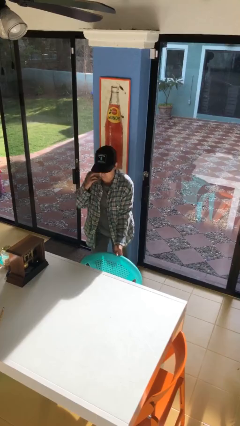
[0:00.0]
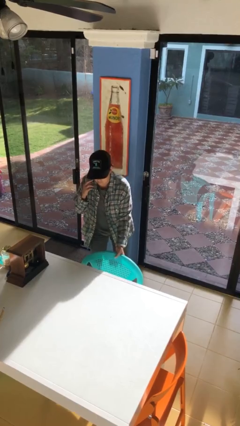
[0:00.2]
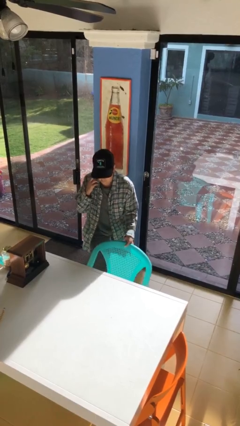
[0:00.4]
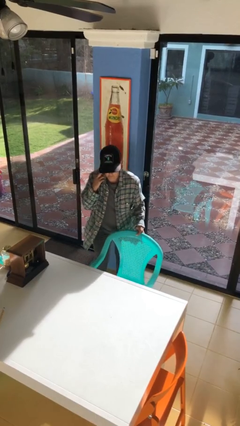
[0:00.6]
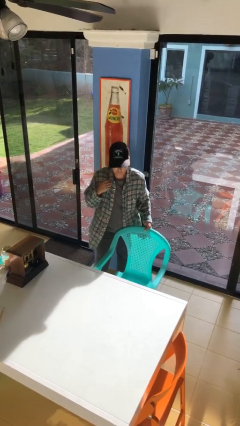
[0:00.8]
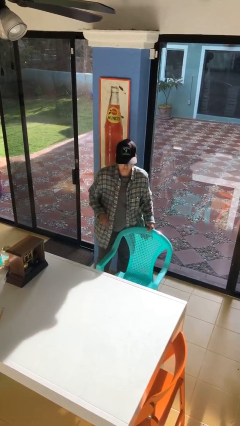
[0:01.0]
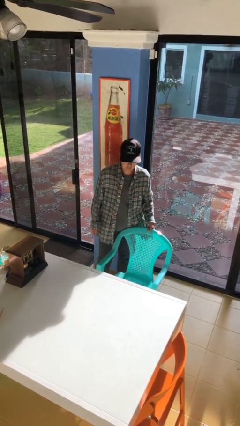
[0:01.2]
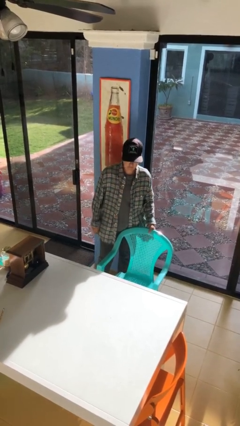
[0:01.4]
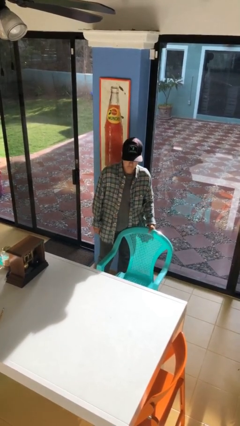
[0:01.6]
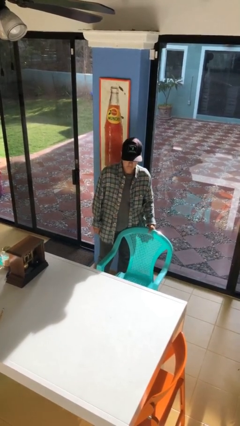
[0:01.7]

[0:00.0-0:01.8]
person pulls out chair

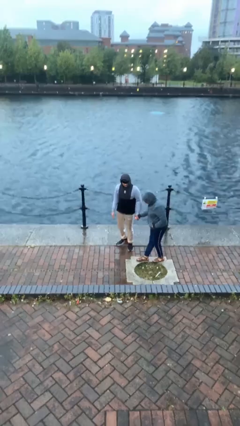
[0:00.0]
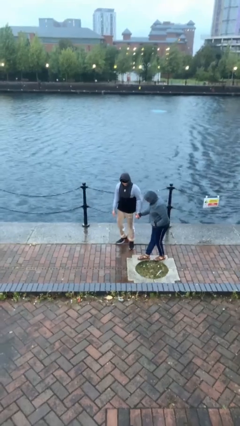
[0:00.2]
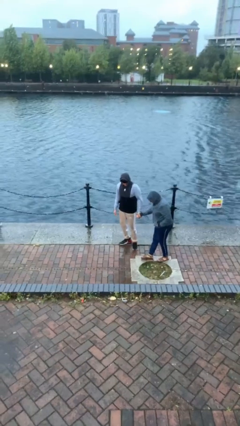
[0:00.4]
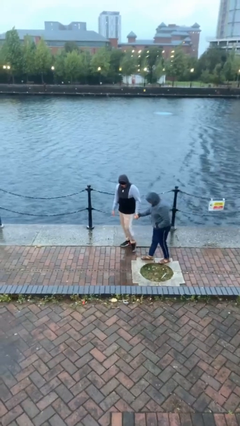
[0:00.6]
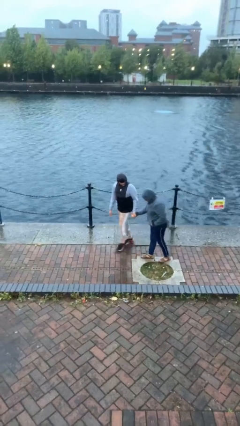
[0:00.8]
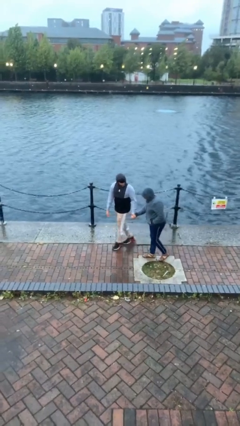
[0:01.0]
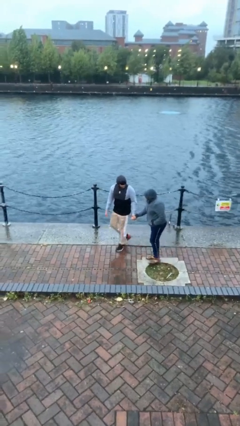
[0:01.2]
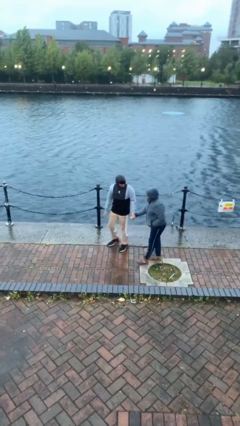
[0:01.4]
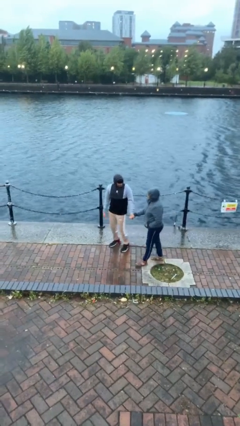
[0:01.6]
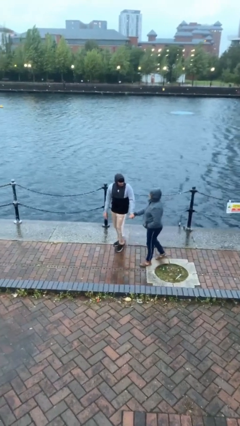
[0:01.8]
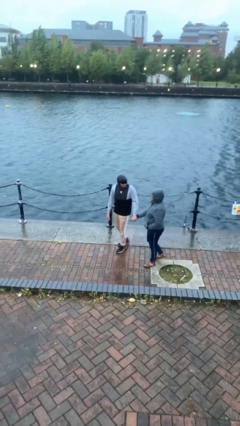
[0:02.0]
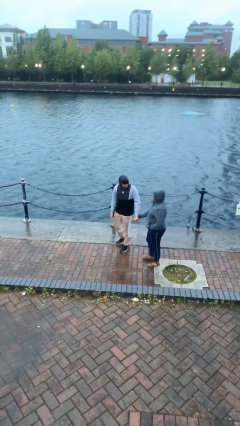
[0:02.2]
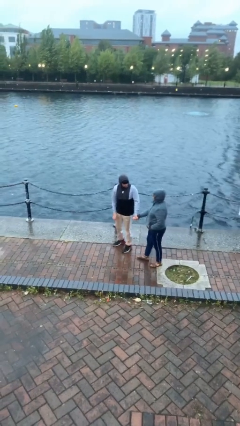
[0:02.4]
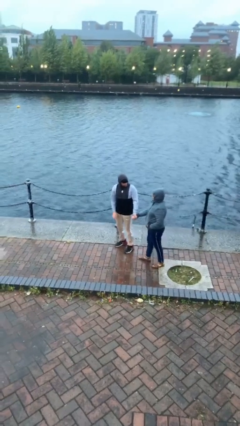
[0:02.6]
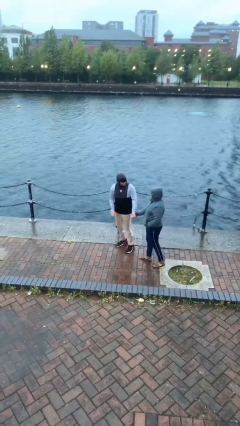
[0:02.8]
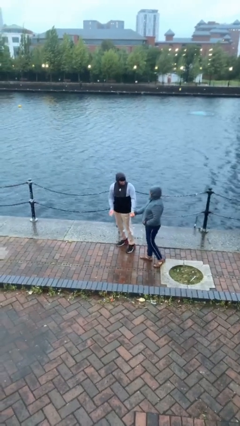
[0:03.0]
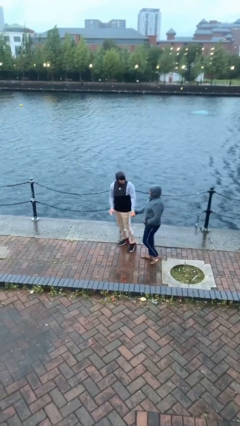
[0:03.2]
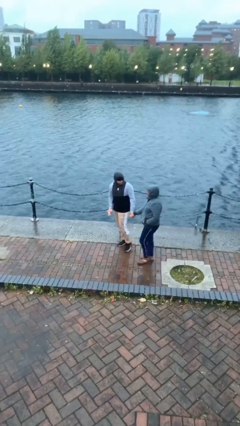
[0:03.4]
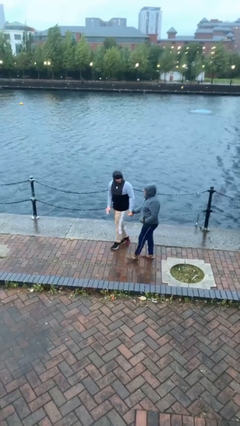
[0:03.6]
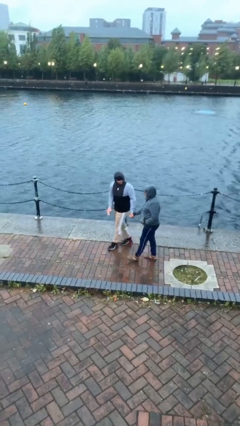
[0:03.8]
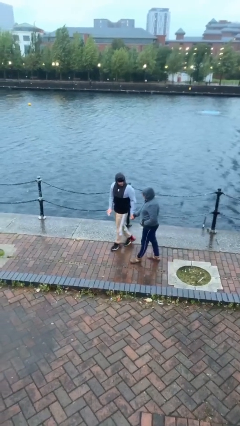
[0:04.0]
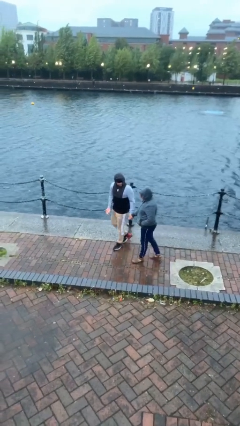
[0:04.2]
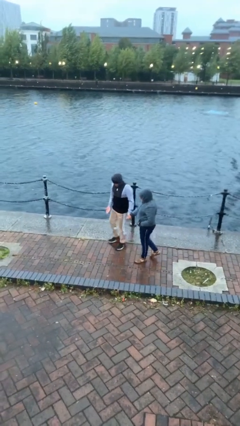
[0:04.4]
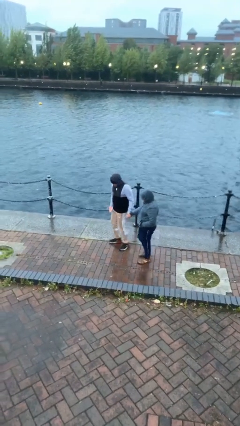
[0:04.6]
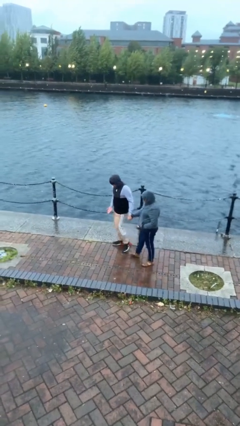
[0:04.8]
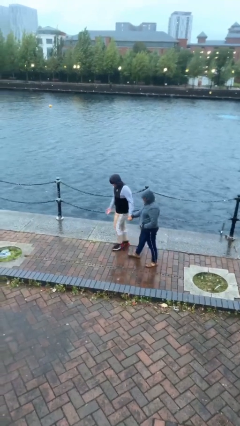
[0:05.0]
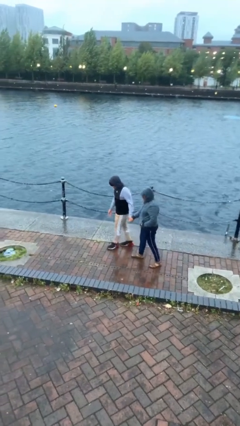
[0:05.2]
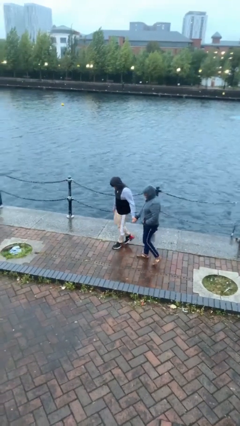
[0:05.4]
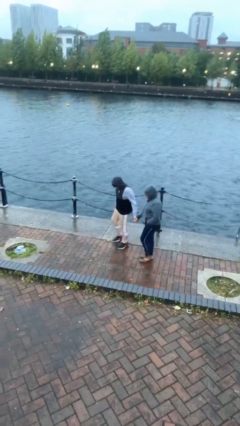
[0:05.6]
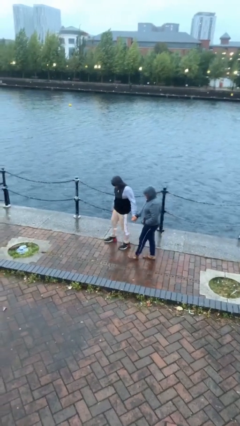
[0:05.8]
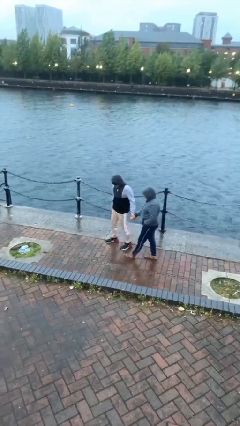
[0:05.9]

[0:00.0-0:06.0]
person holds hand

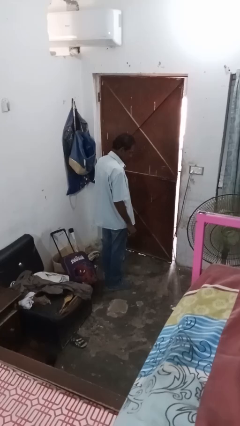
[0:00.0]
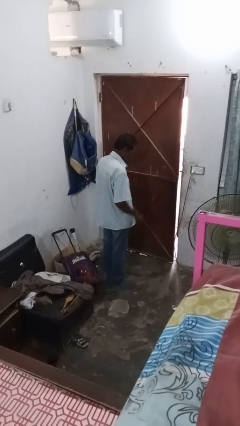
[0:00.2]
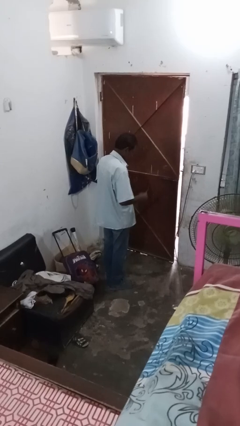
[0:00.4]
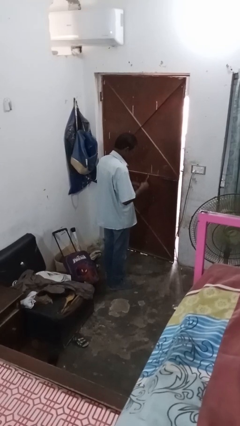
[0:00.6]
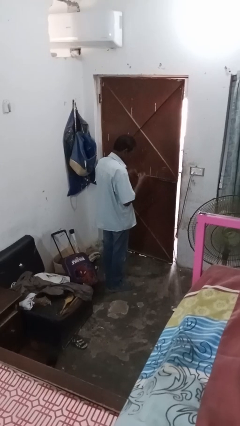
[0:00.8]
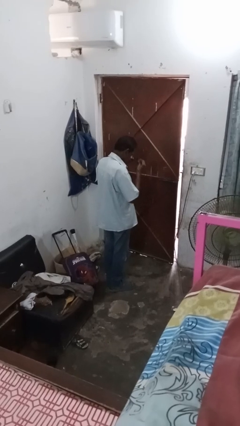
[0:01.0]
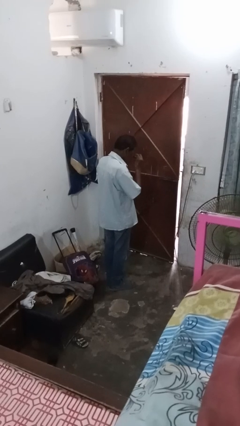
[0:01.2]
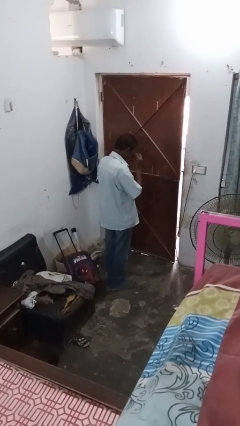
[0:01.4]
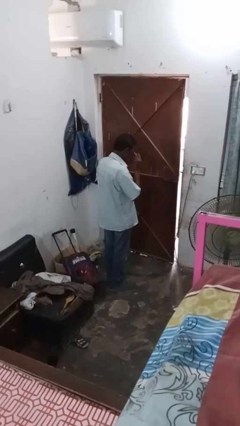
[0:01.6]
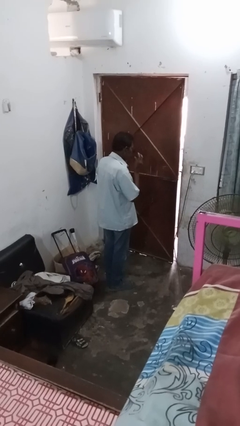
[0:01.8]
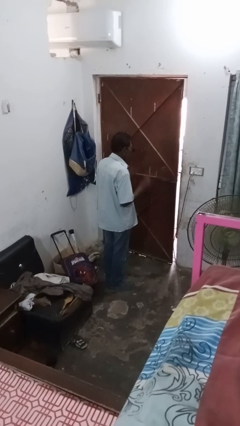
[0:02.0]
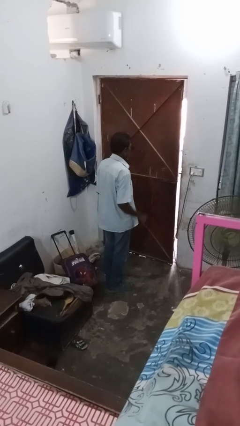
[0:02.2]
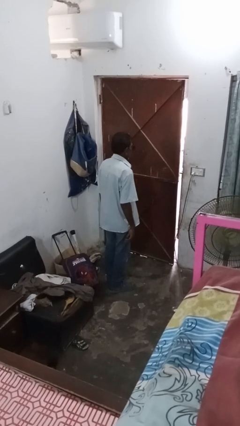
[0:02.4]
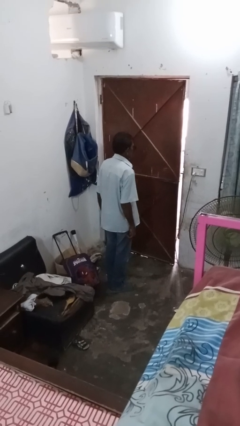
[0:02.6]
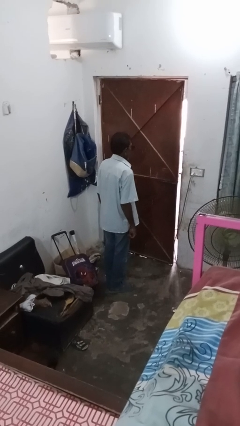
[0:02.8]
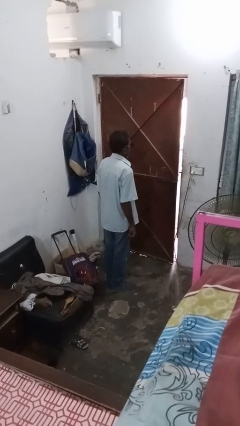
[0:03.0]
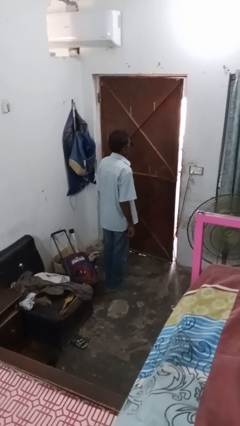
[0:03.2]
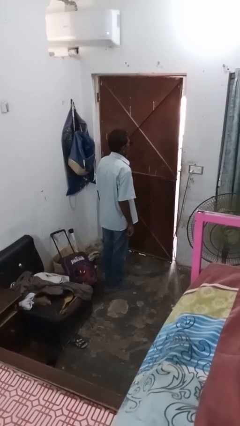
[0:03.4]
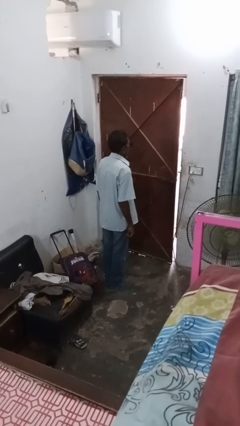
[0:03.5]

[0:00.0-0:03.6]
person puts on sunglasses

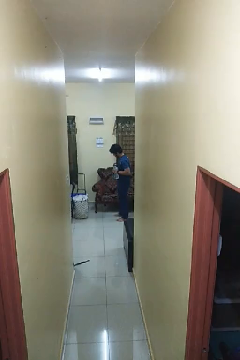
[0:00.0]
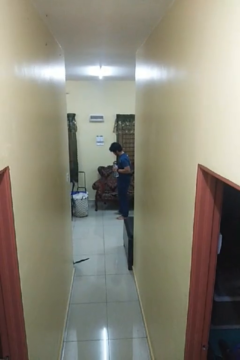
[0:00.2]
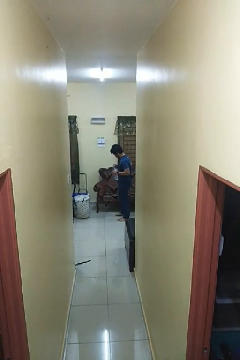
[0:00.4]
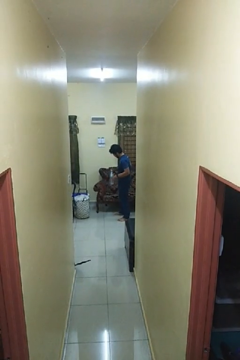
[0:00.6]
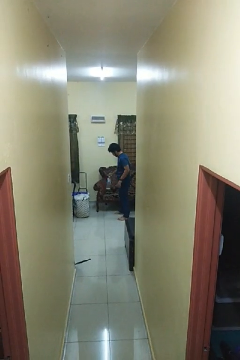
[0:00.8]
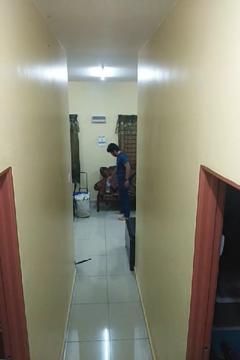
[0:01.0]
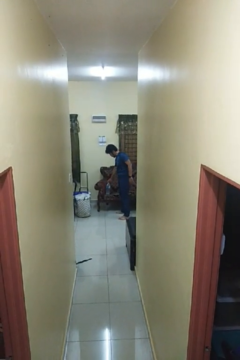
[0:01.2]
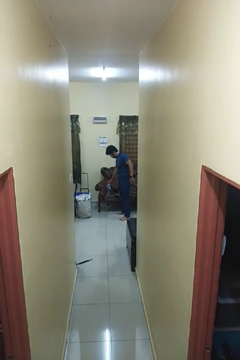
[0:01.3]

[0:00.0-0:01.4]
person puts down object on couch

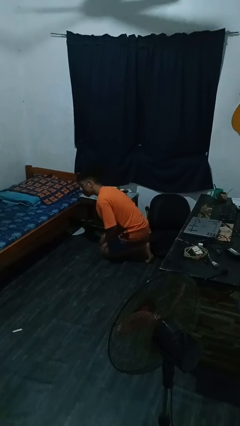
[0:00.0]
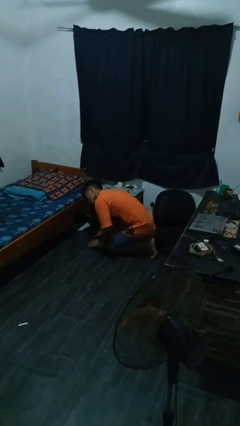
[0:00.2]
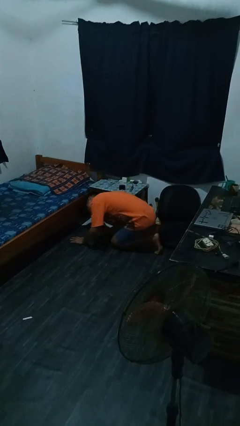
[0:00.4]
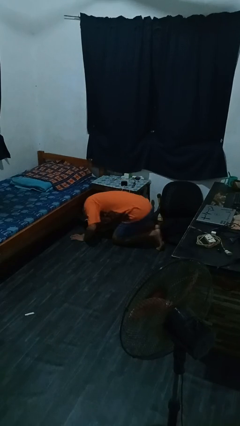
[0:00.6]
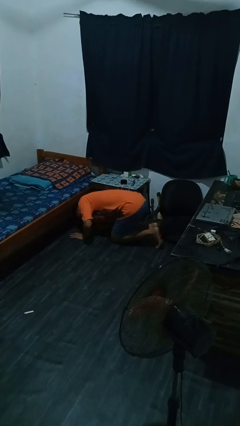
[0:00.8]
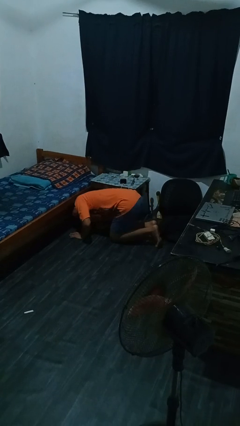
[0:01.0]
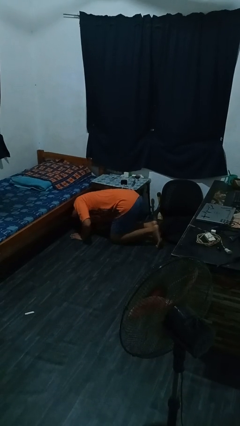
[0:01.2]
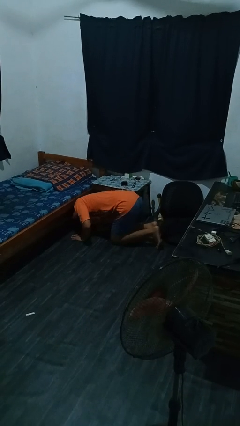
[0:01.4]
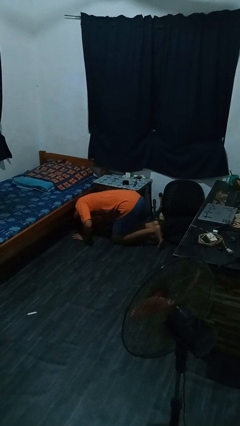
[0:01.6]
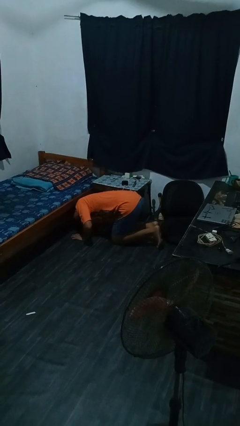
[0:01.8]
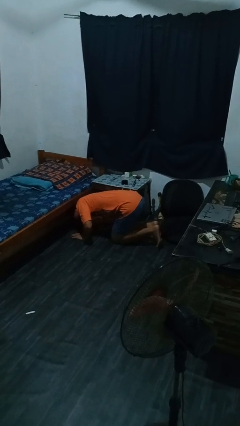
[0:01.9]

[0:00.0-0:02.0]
person searches under bed

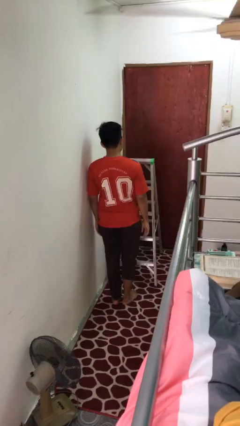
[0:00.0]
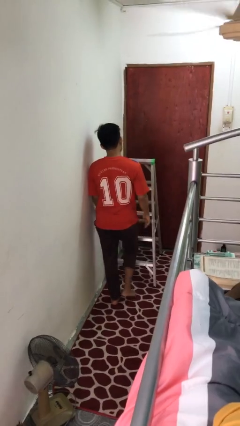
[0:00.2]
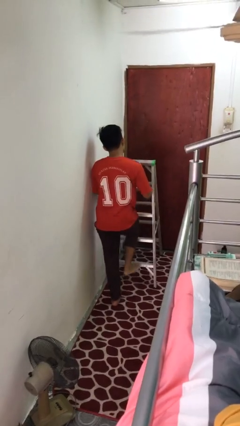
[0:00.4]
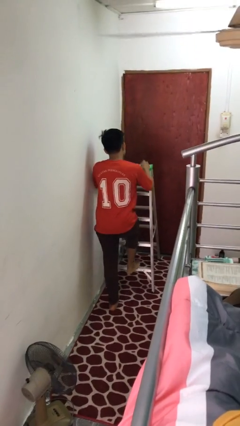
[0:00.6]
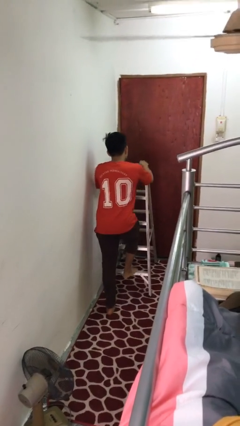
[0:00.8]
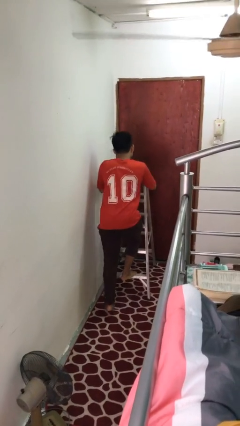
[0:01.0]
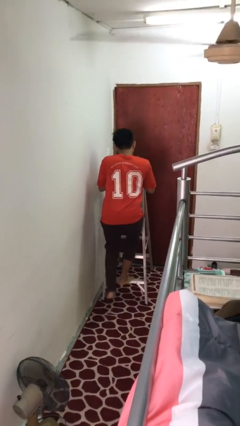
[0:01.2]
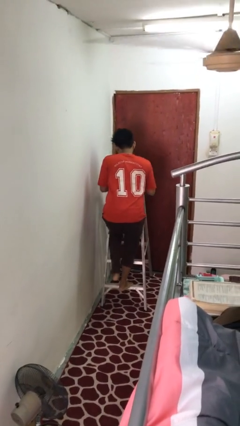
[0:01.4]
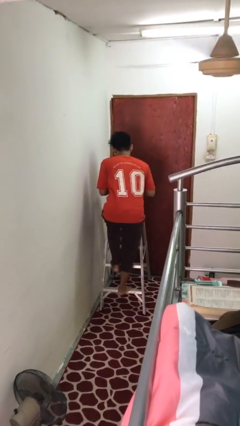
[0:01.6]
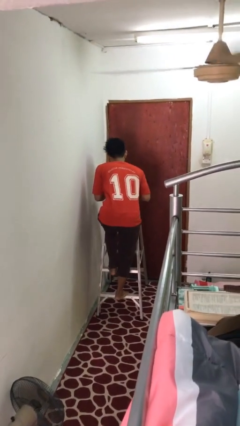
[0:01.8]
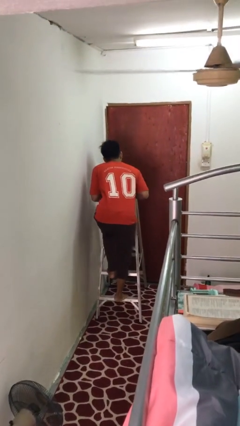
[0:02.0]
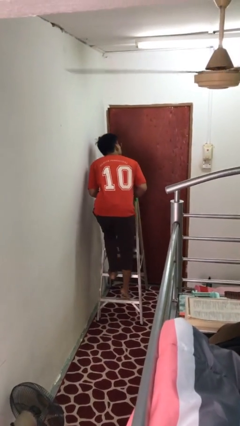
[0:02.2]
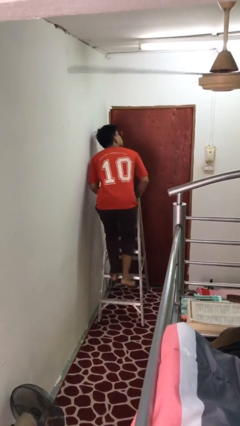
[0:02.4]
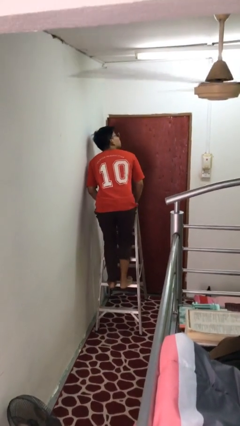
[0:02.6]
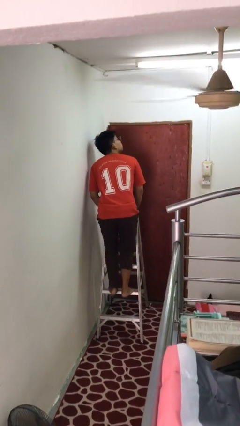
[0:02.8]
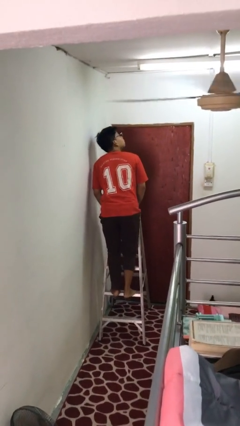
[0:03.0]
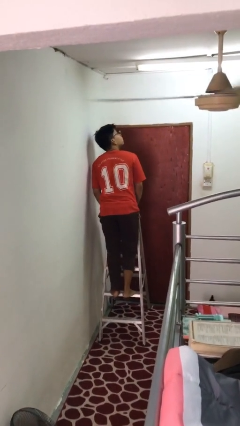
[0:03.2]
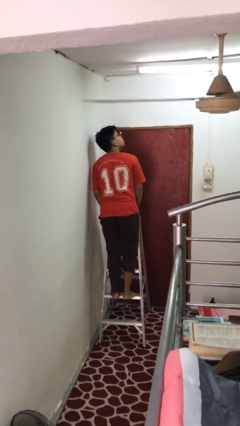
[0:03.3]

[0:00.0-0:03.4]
person climbs up ladder
